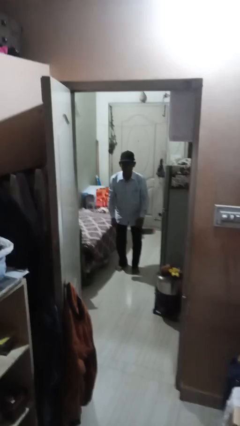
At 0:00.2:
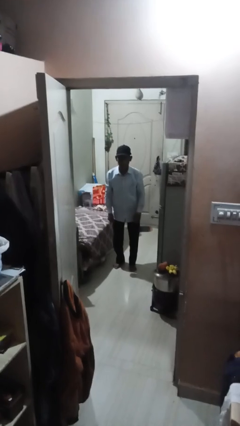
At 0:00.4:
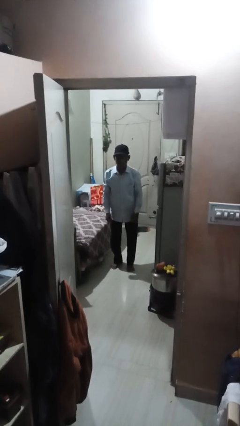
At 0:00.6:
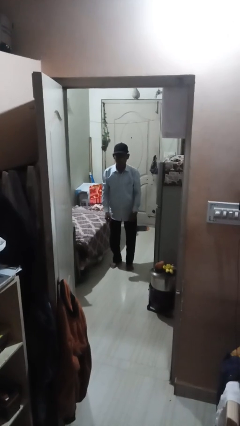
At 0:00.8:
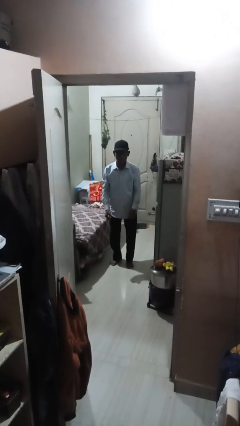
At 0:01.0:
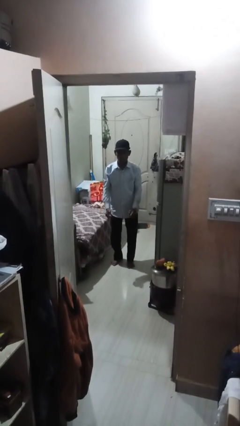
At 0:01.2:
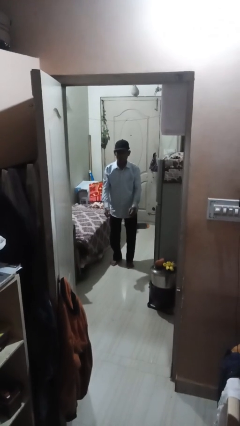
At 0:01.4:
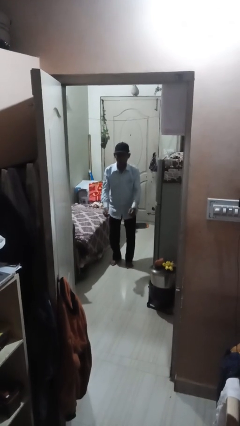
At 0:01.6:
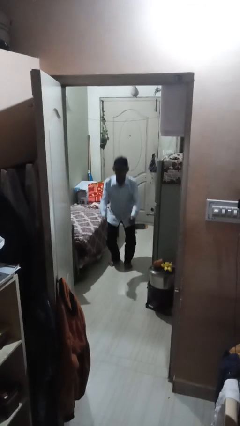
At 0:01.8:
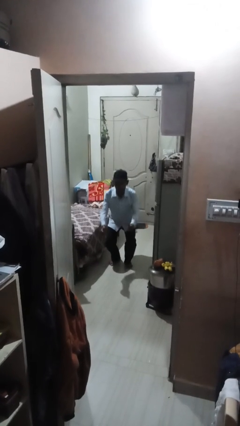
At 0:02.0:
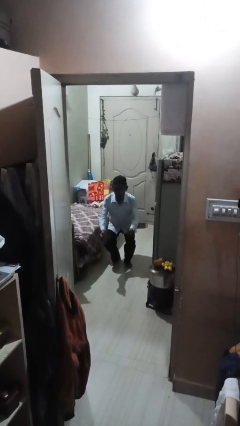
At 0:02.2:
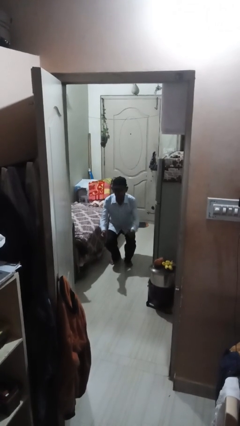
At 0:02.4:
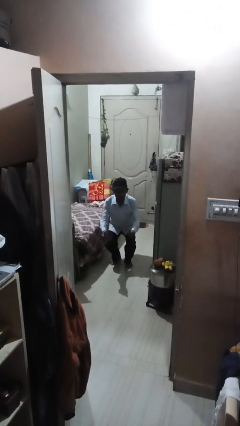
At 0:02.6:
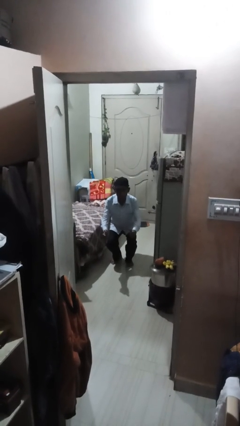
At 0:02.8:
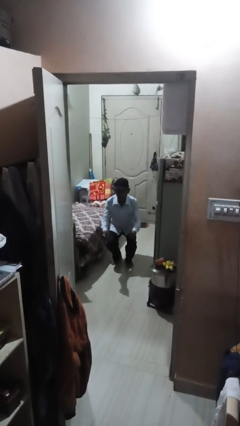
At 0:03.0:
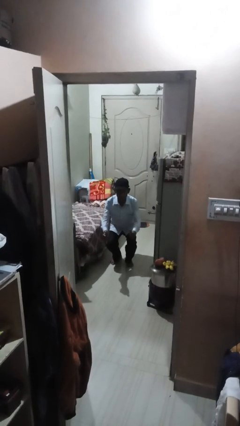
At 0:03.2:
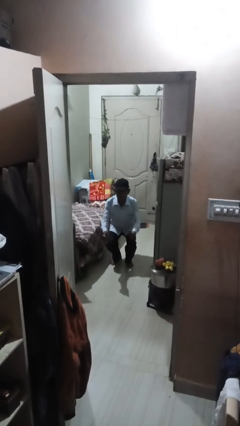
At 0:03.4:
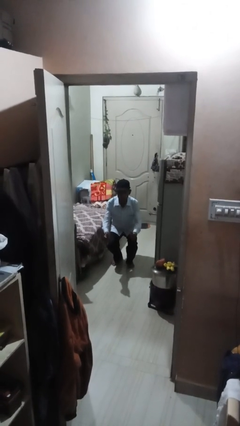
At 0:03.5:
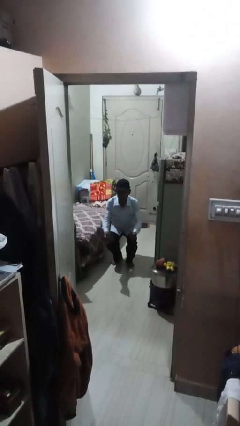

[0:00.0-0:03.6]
person squats

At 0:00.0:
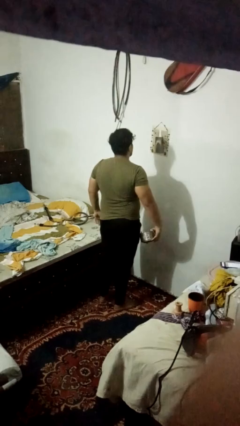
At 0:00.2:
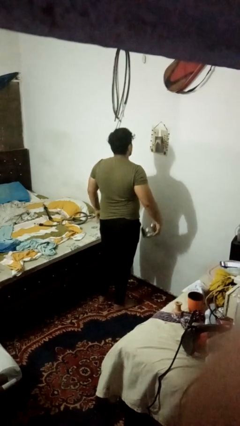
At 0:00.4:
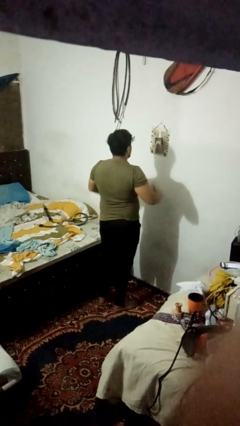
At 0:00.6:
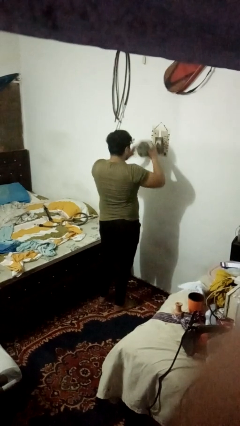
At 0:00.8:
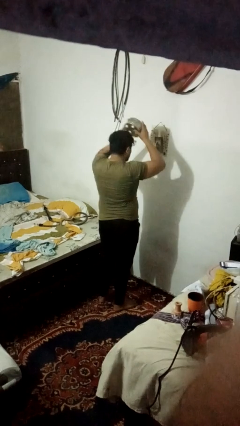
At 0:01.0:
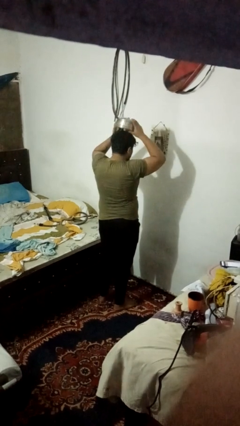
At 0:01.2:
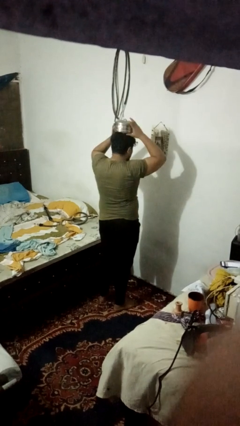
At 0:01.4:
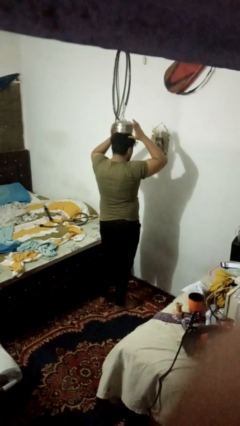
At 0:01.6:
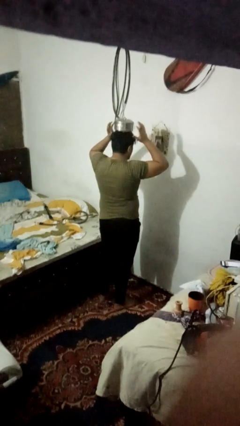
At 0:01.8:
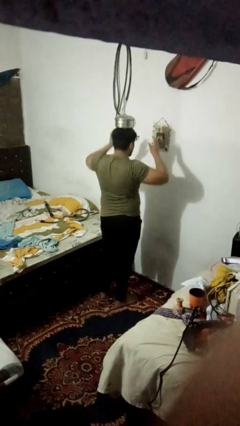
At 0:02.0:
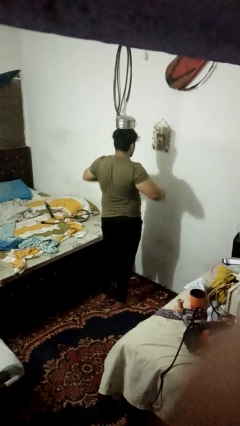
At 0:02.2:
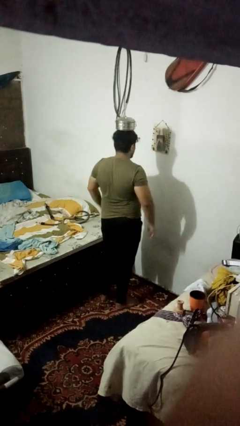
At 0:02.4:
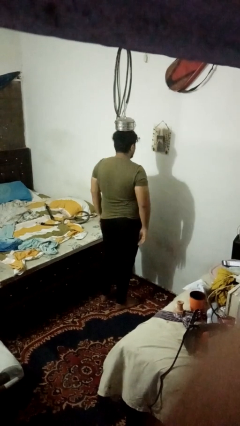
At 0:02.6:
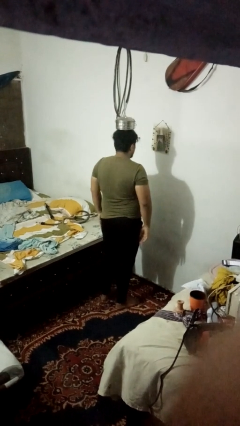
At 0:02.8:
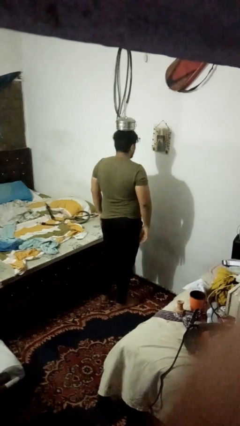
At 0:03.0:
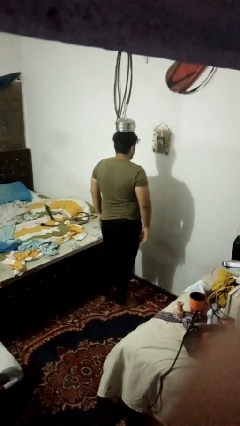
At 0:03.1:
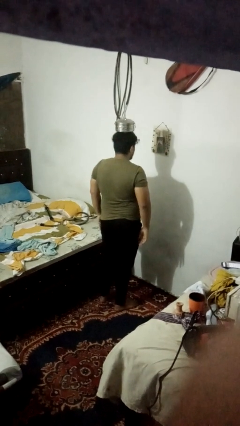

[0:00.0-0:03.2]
person holds object above head

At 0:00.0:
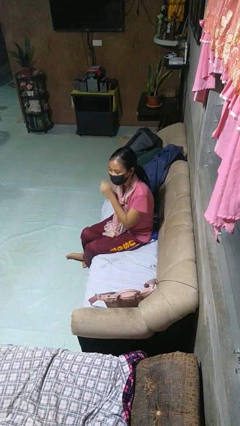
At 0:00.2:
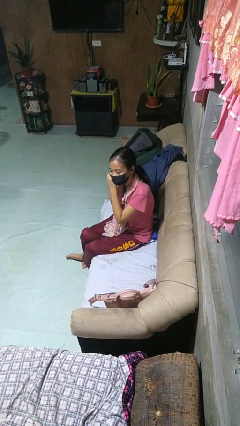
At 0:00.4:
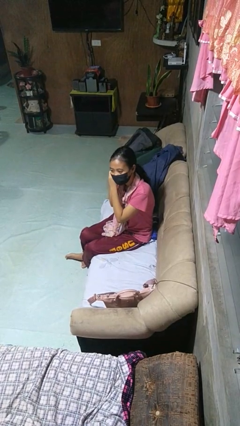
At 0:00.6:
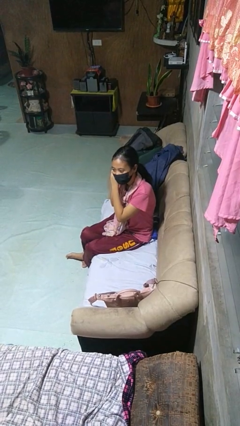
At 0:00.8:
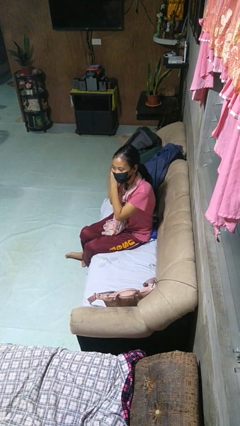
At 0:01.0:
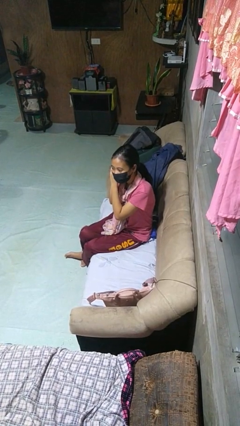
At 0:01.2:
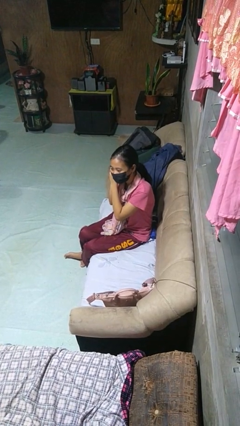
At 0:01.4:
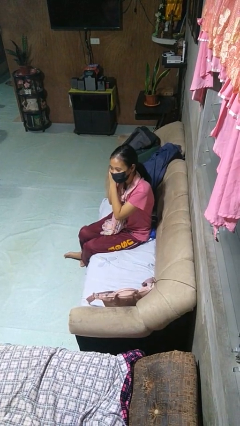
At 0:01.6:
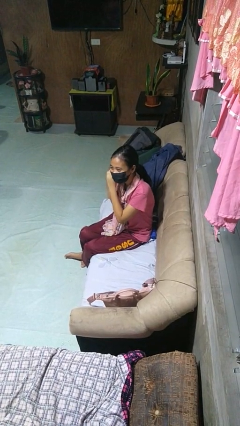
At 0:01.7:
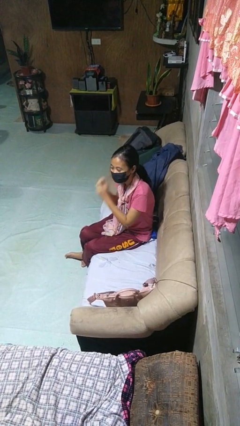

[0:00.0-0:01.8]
person puts on earrings

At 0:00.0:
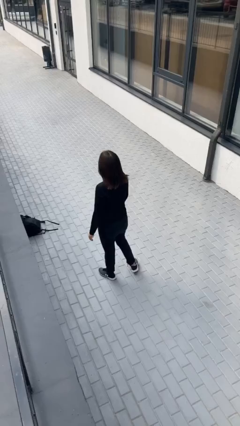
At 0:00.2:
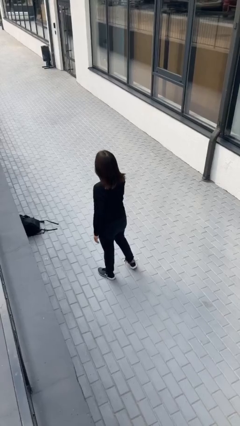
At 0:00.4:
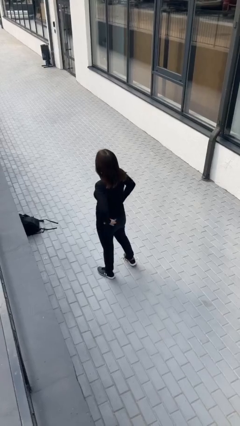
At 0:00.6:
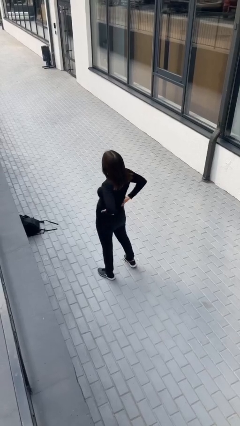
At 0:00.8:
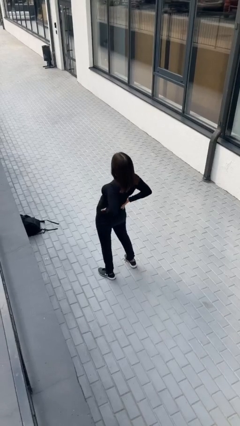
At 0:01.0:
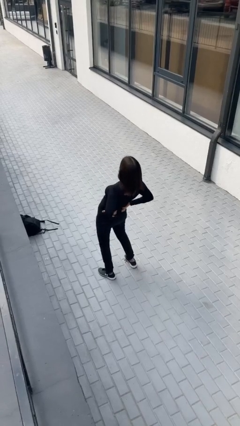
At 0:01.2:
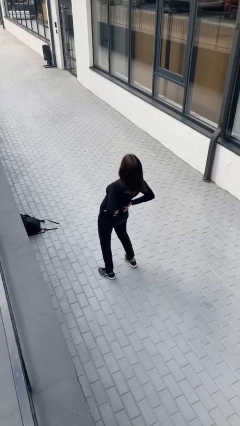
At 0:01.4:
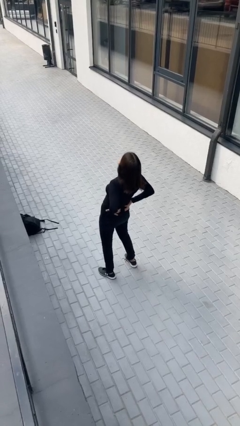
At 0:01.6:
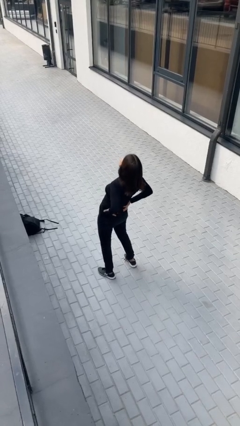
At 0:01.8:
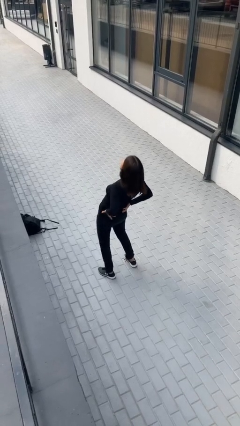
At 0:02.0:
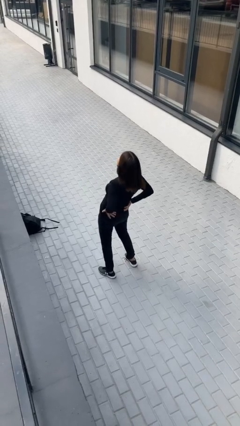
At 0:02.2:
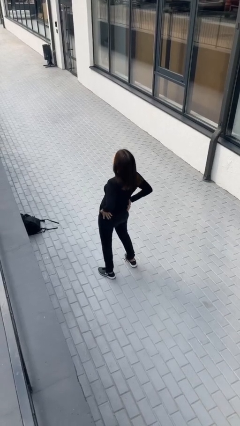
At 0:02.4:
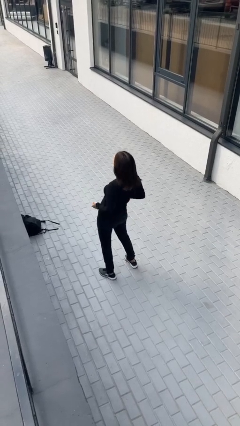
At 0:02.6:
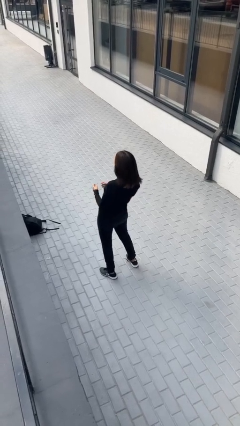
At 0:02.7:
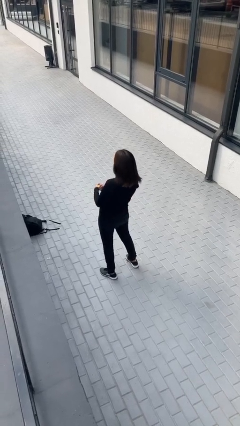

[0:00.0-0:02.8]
person stretches back

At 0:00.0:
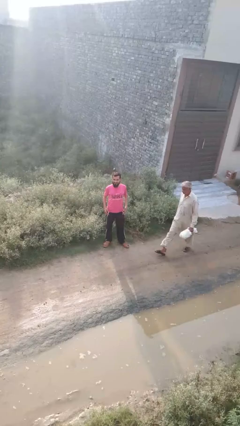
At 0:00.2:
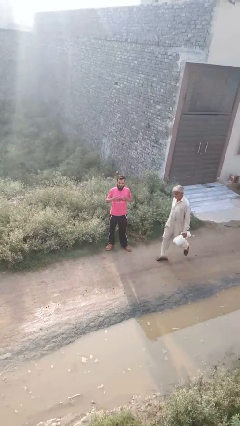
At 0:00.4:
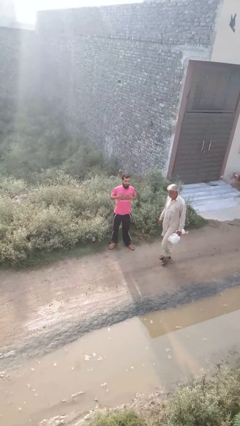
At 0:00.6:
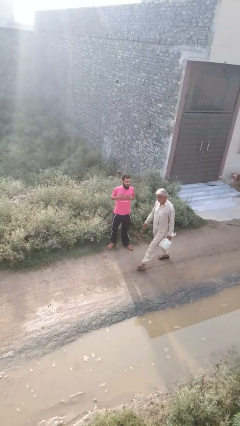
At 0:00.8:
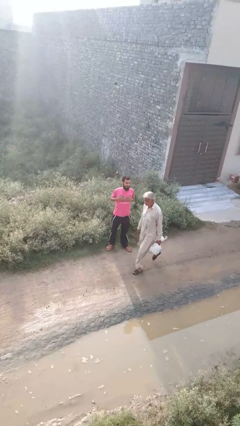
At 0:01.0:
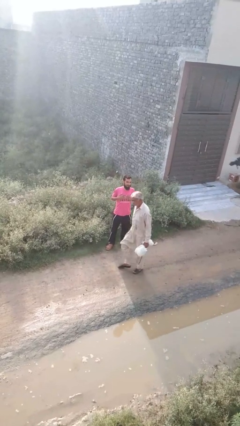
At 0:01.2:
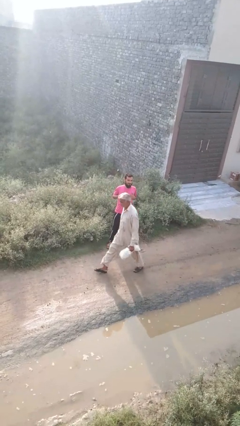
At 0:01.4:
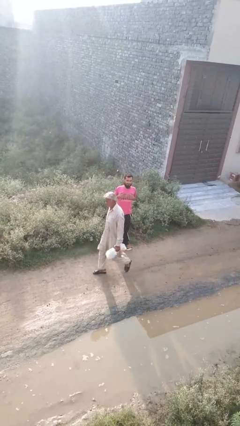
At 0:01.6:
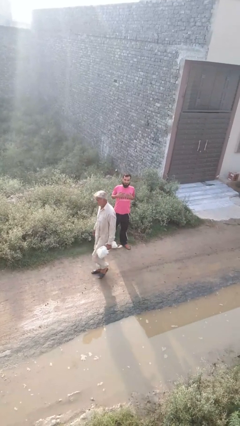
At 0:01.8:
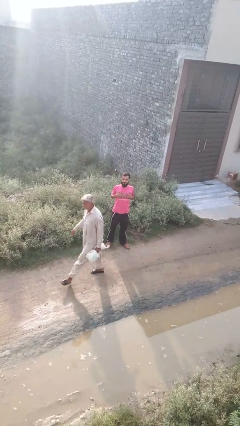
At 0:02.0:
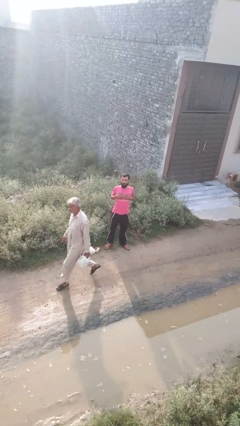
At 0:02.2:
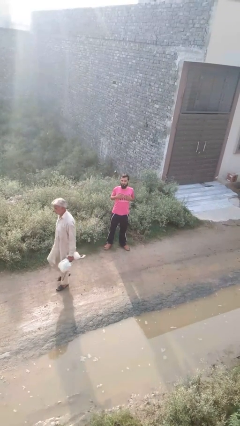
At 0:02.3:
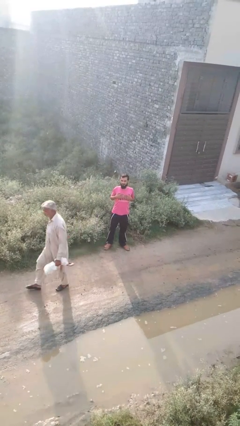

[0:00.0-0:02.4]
person drums on chest

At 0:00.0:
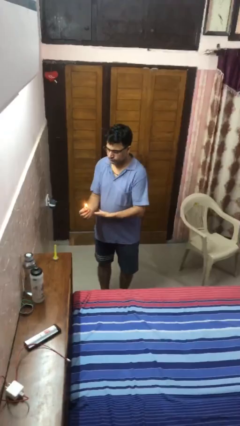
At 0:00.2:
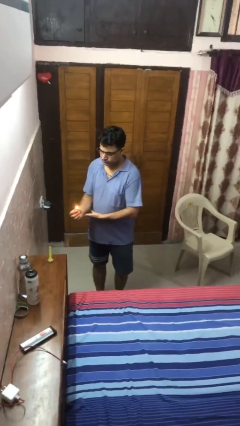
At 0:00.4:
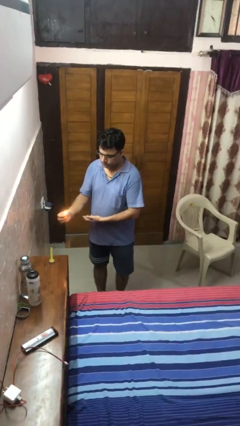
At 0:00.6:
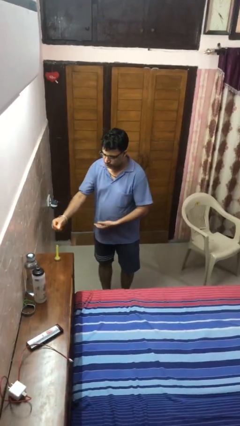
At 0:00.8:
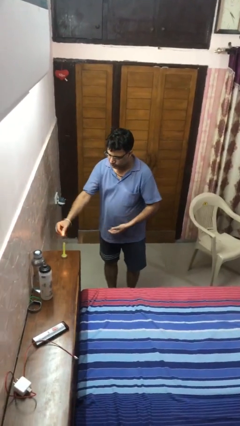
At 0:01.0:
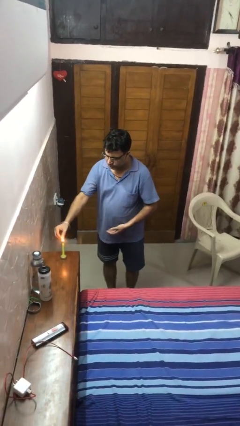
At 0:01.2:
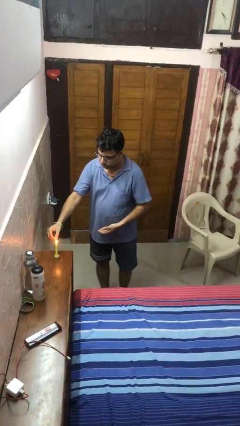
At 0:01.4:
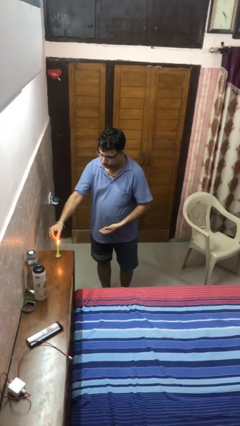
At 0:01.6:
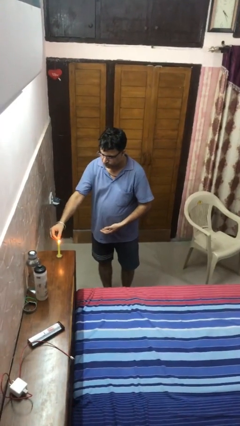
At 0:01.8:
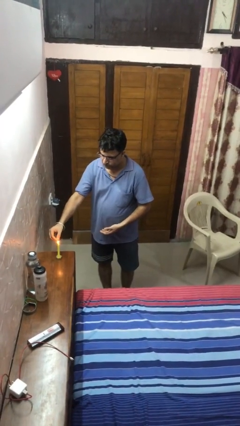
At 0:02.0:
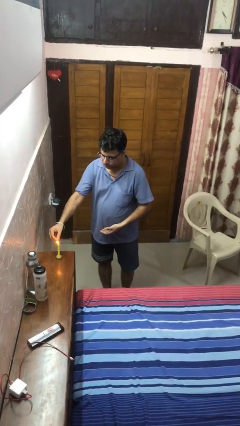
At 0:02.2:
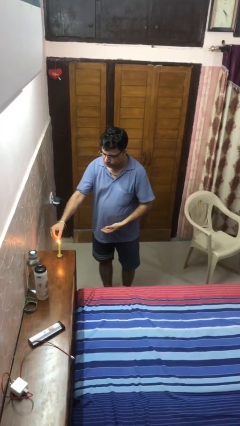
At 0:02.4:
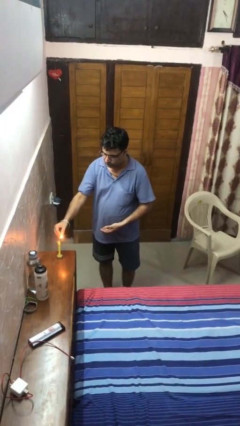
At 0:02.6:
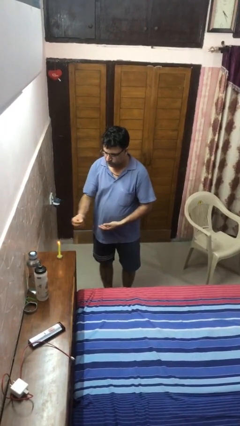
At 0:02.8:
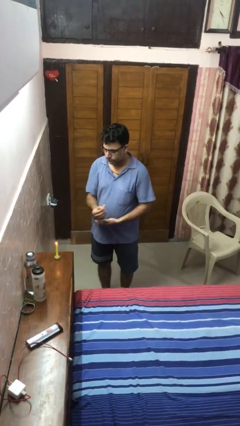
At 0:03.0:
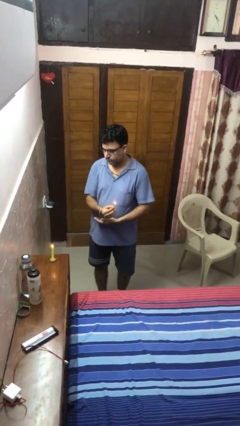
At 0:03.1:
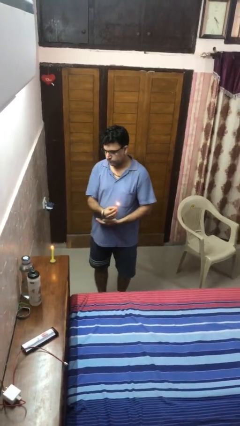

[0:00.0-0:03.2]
person lights candle
